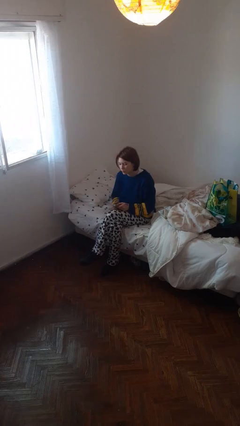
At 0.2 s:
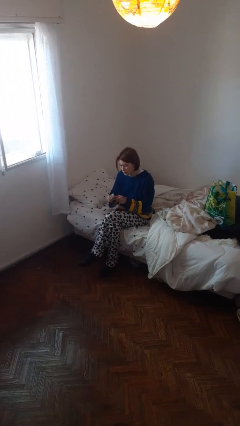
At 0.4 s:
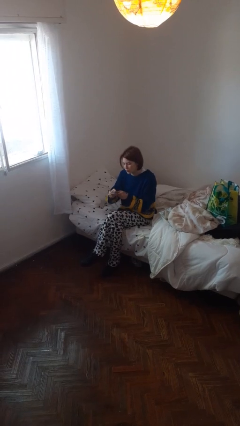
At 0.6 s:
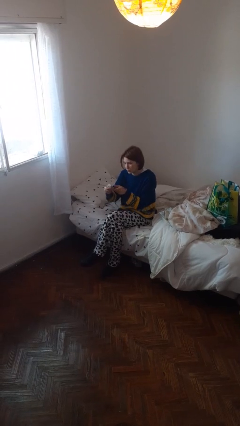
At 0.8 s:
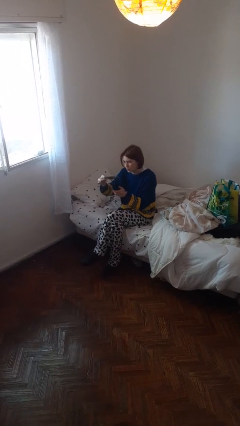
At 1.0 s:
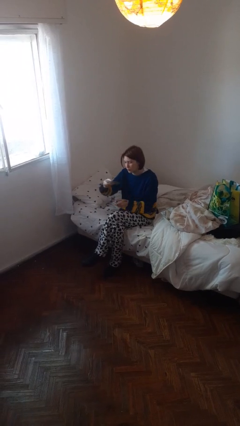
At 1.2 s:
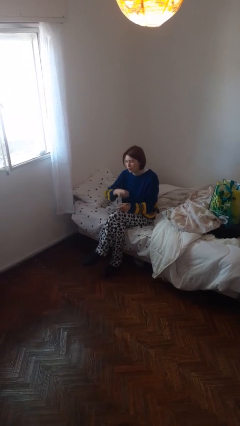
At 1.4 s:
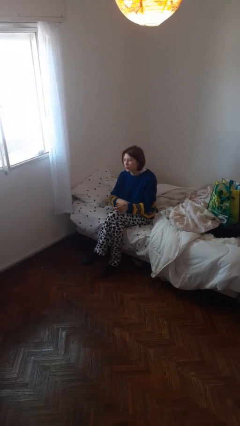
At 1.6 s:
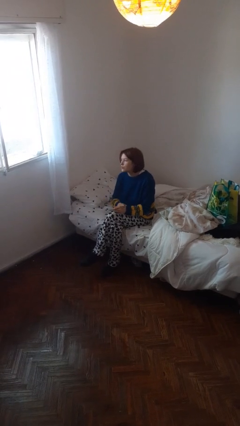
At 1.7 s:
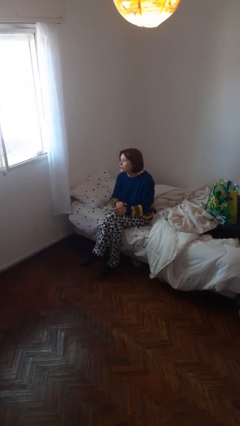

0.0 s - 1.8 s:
person uses television remote

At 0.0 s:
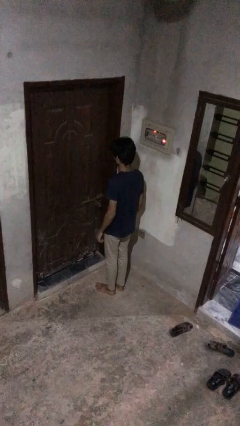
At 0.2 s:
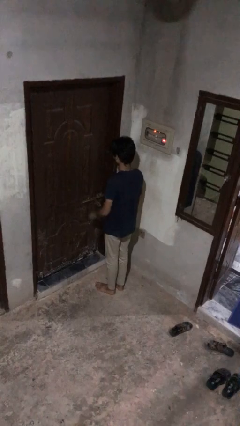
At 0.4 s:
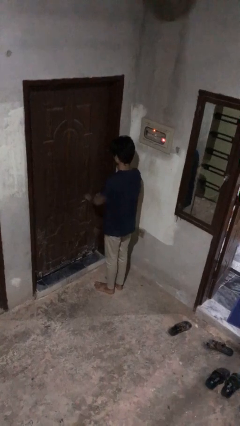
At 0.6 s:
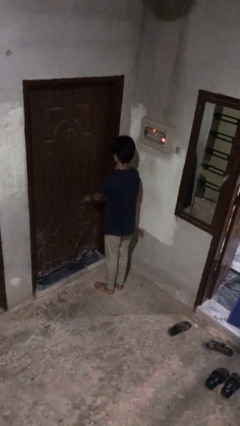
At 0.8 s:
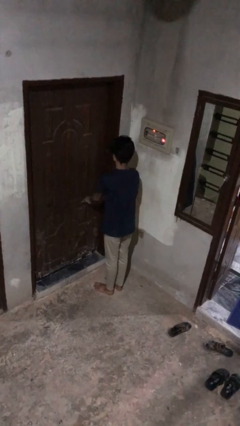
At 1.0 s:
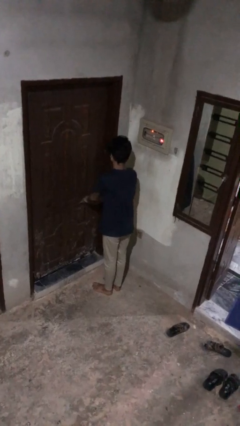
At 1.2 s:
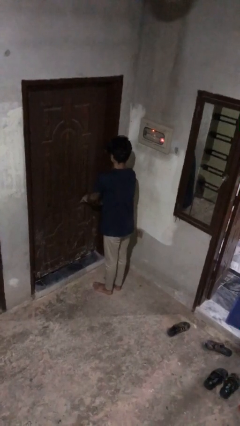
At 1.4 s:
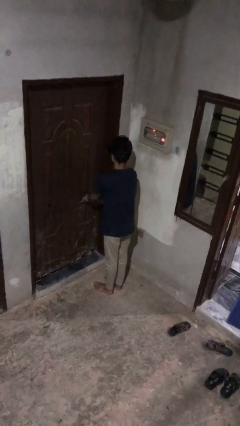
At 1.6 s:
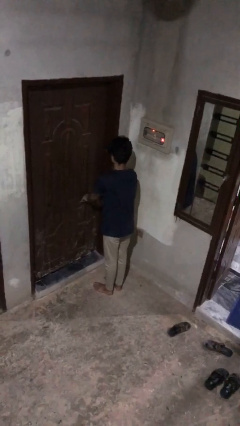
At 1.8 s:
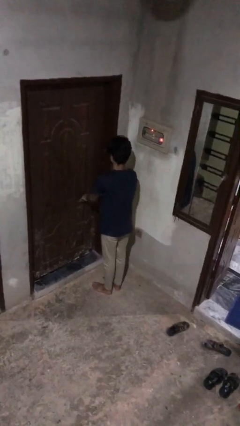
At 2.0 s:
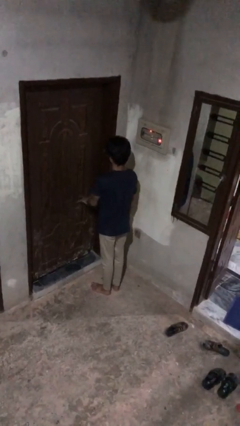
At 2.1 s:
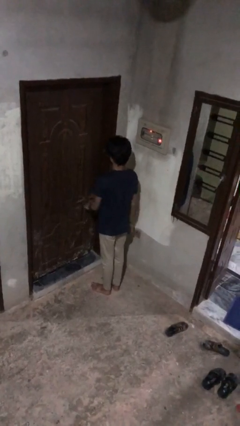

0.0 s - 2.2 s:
person unlocks door with keys

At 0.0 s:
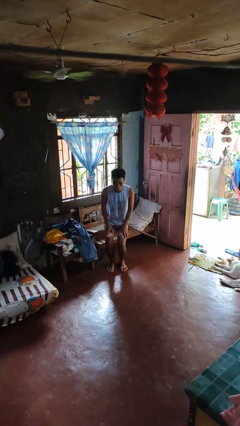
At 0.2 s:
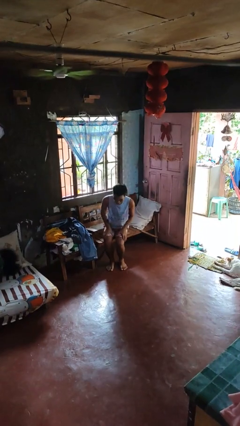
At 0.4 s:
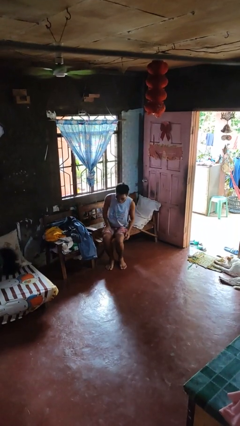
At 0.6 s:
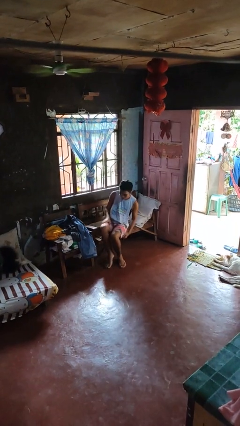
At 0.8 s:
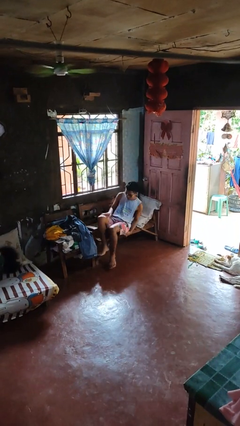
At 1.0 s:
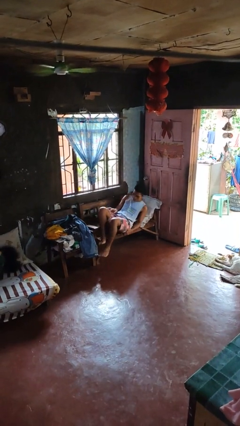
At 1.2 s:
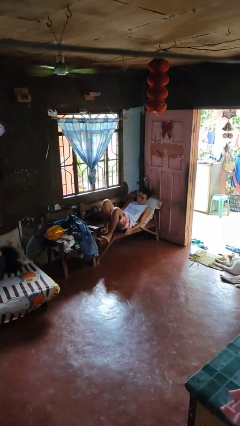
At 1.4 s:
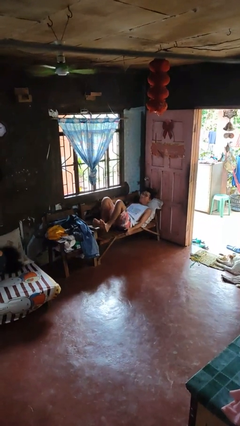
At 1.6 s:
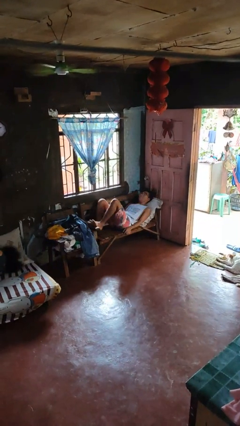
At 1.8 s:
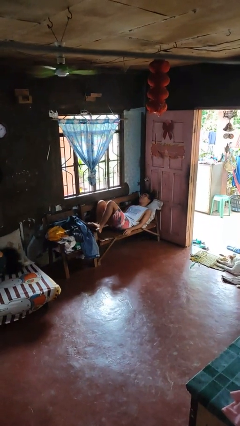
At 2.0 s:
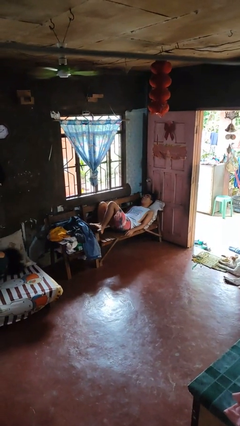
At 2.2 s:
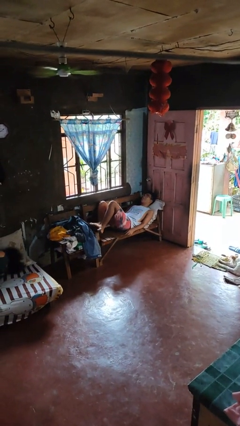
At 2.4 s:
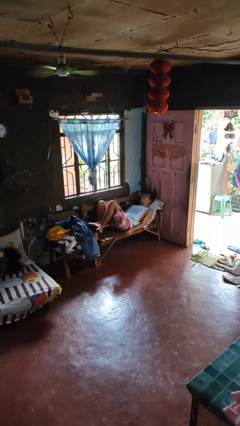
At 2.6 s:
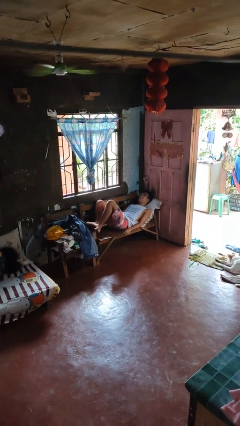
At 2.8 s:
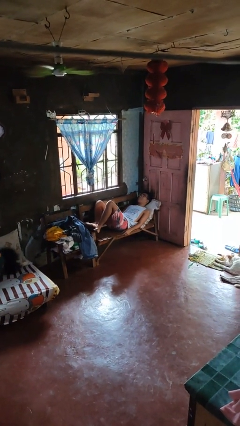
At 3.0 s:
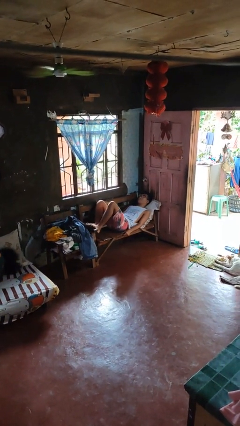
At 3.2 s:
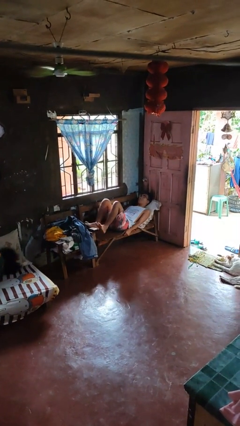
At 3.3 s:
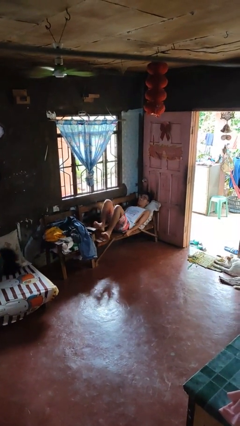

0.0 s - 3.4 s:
person lies down on couch

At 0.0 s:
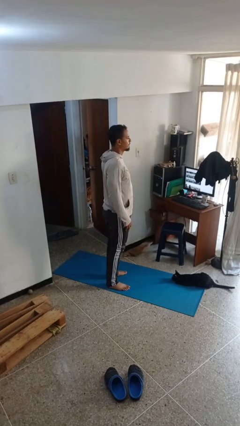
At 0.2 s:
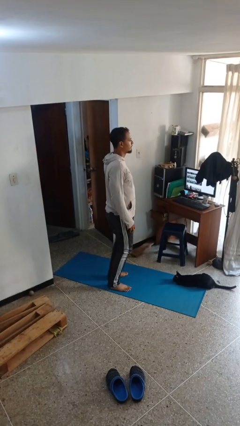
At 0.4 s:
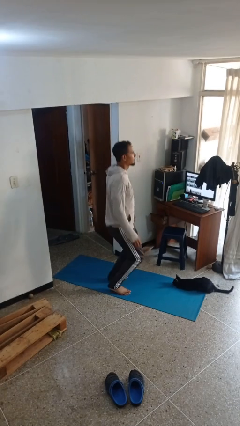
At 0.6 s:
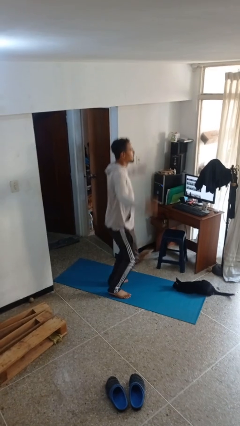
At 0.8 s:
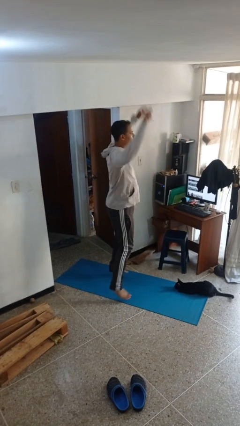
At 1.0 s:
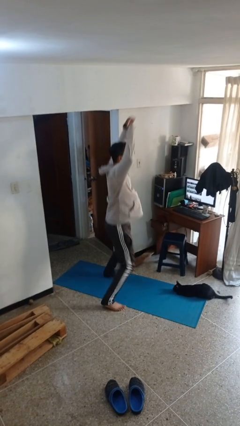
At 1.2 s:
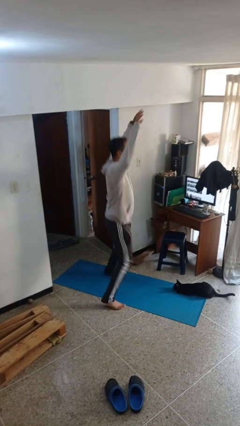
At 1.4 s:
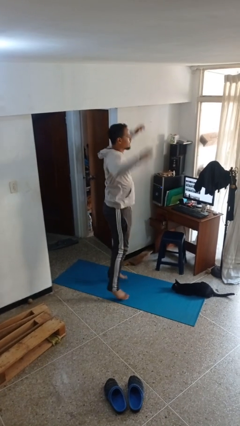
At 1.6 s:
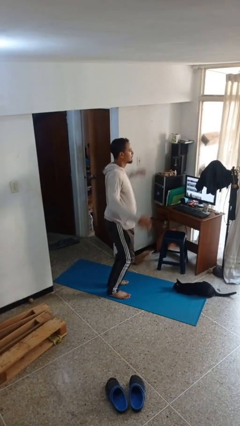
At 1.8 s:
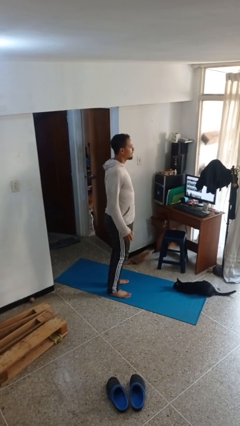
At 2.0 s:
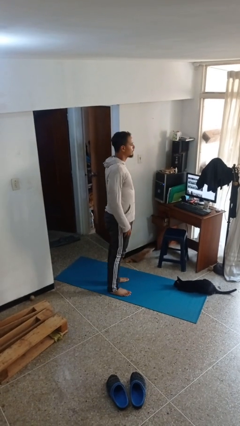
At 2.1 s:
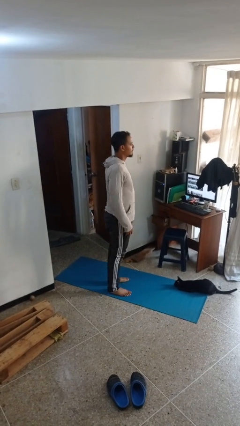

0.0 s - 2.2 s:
person exercises with jumping jacks

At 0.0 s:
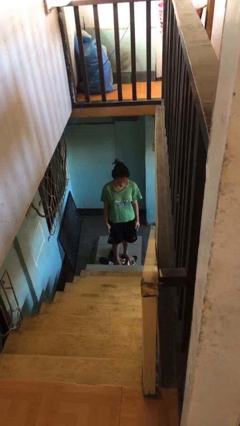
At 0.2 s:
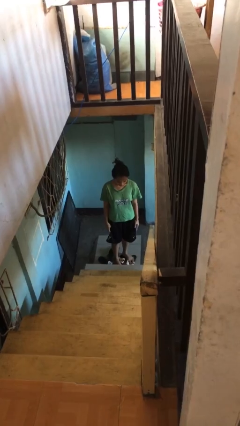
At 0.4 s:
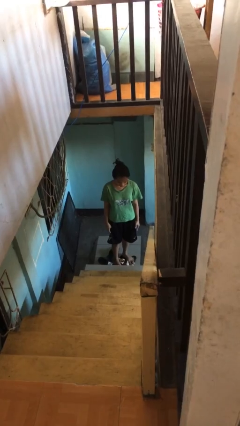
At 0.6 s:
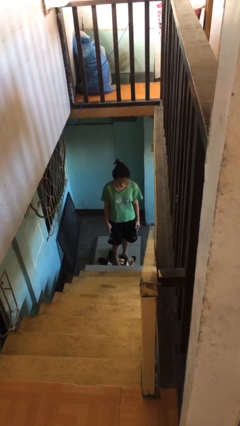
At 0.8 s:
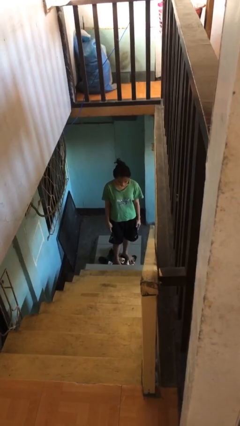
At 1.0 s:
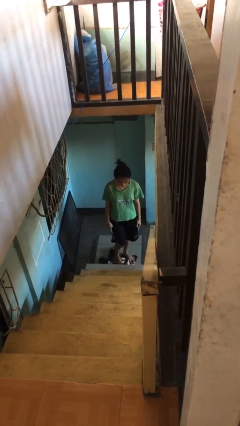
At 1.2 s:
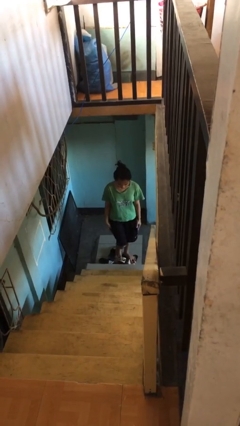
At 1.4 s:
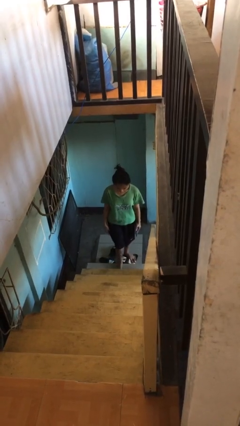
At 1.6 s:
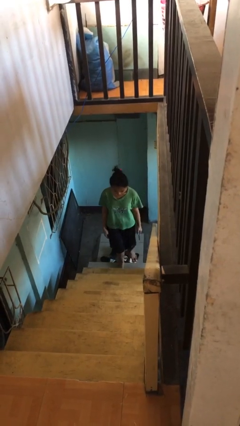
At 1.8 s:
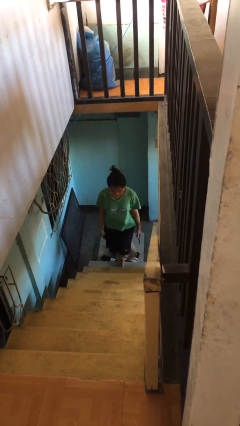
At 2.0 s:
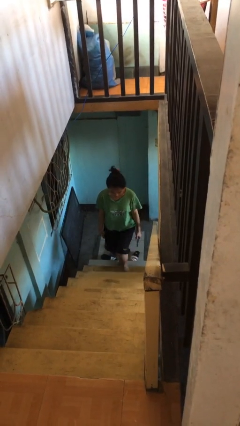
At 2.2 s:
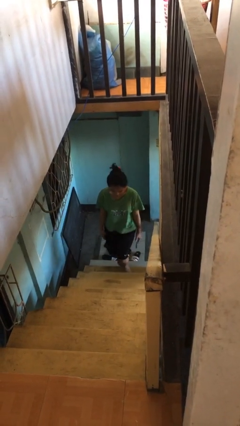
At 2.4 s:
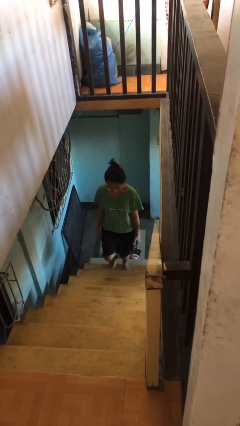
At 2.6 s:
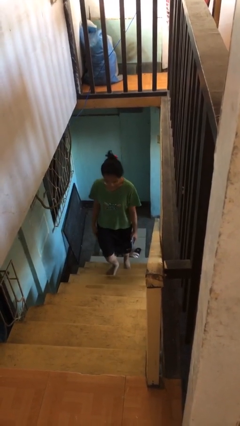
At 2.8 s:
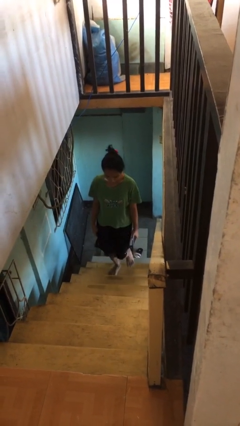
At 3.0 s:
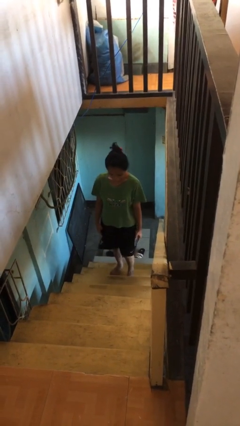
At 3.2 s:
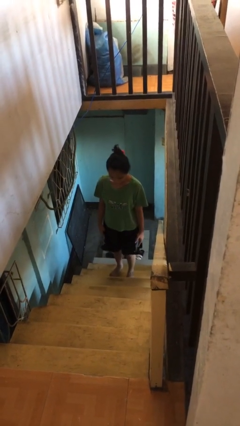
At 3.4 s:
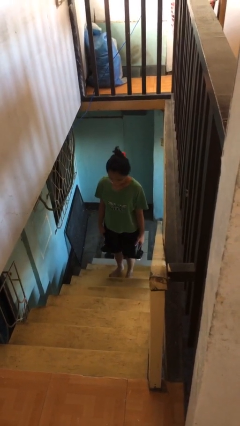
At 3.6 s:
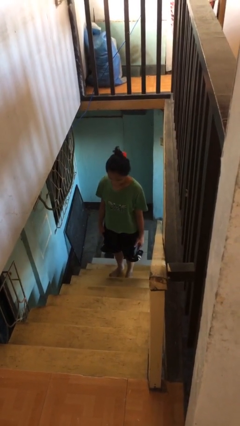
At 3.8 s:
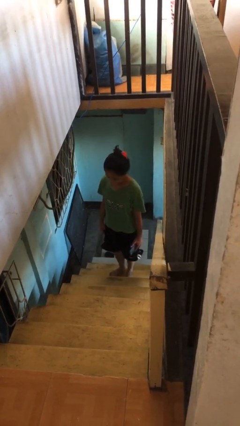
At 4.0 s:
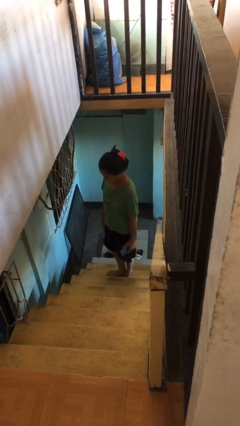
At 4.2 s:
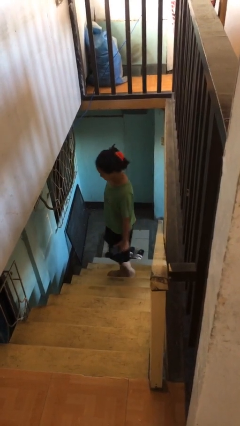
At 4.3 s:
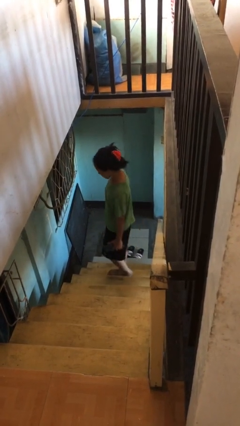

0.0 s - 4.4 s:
person climbs up stairs

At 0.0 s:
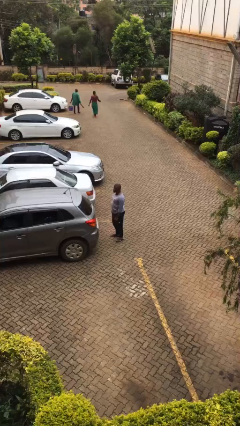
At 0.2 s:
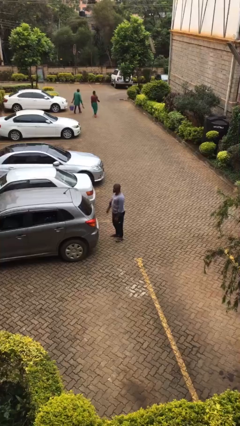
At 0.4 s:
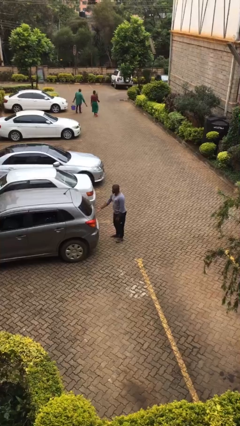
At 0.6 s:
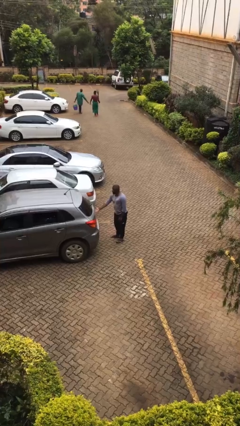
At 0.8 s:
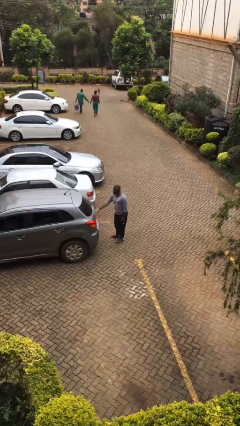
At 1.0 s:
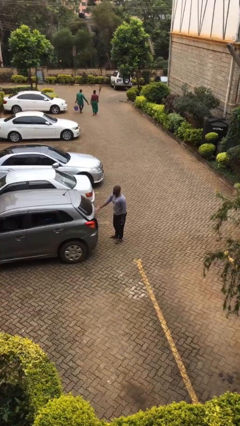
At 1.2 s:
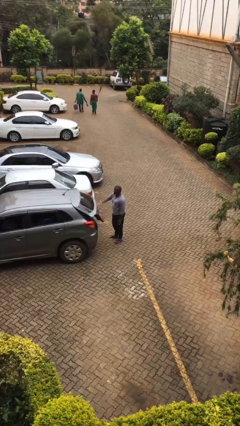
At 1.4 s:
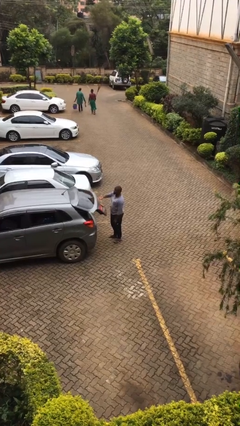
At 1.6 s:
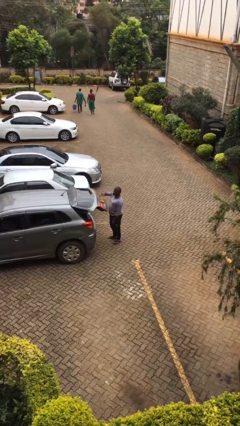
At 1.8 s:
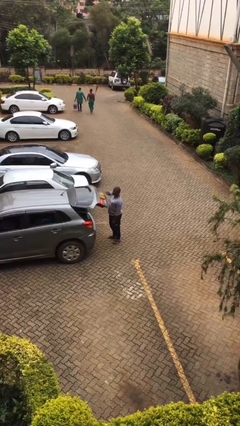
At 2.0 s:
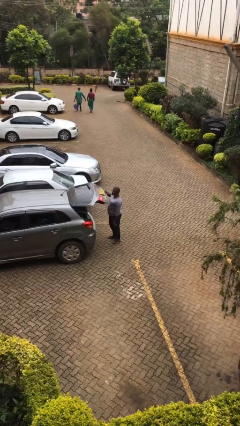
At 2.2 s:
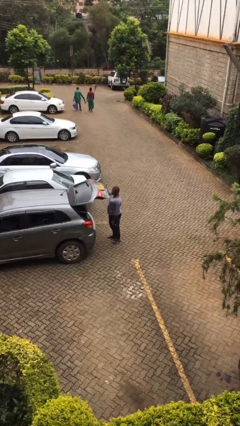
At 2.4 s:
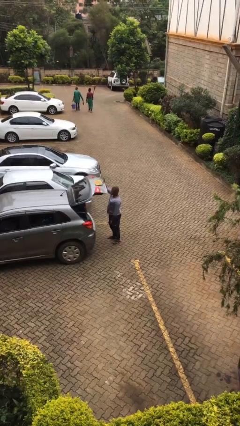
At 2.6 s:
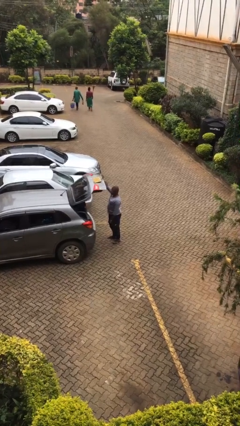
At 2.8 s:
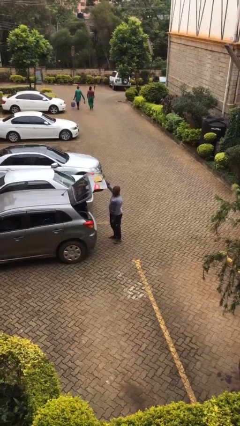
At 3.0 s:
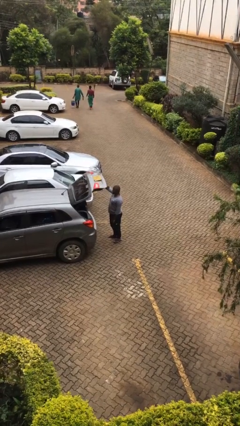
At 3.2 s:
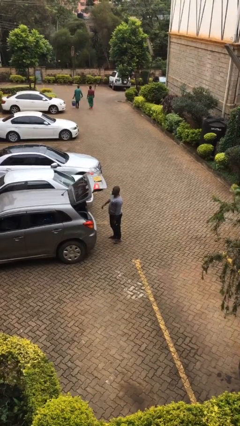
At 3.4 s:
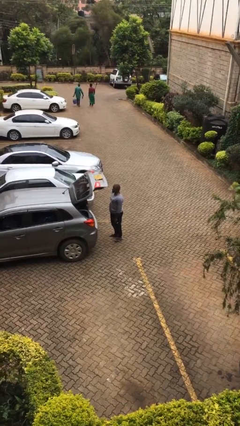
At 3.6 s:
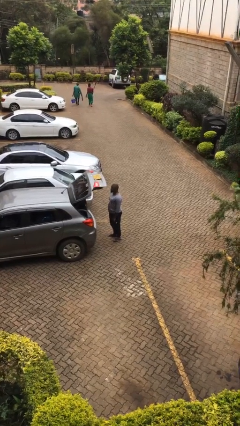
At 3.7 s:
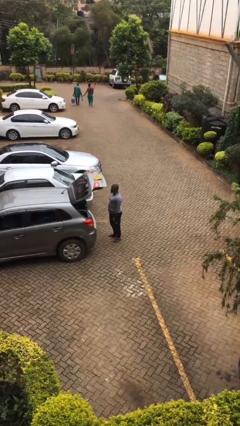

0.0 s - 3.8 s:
person opens car trunk
